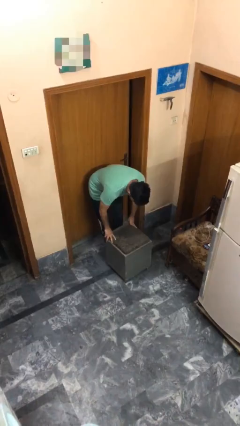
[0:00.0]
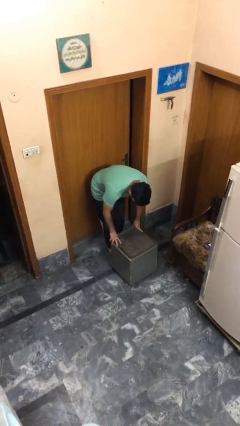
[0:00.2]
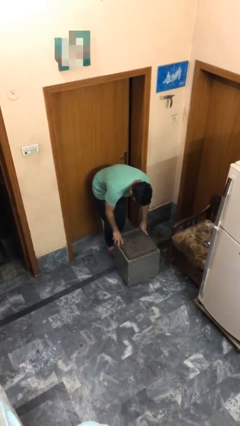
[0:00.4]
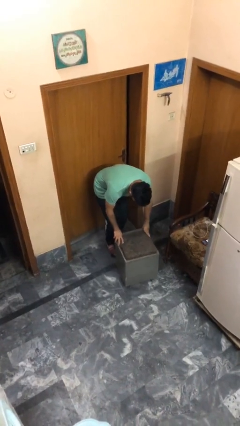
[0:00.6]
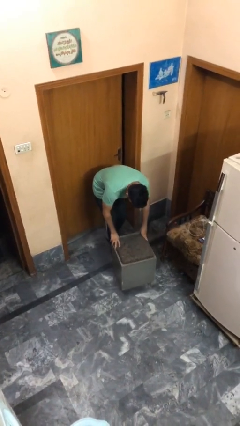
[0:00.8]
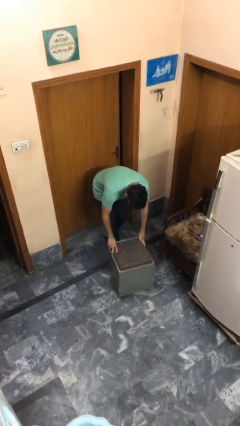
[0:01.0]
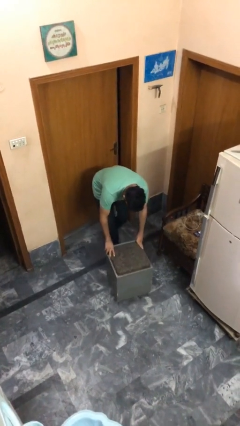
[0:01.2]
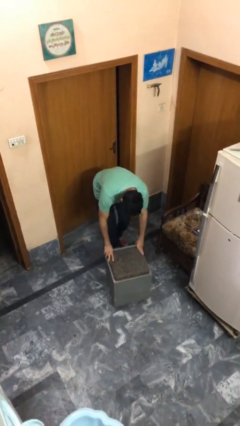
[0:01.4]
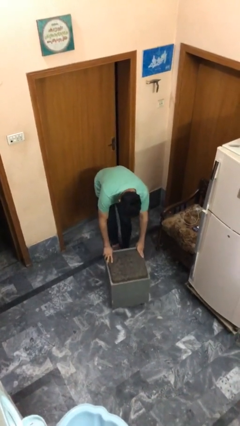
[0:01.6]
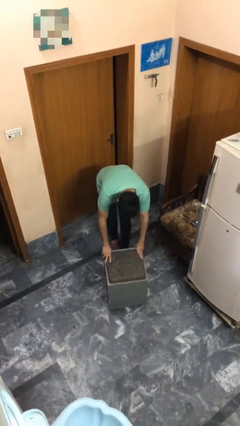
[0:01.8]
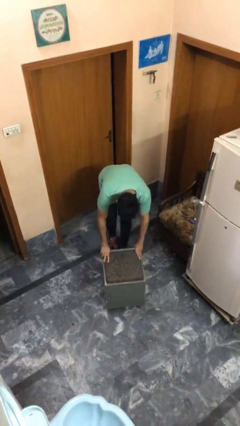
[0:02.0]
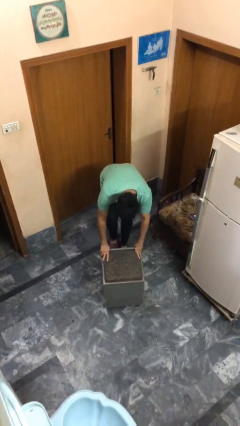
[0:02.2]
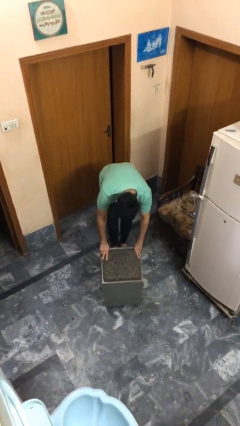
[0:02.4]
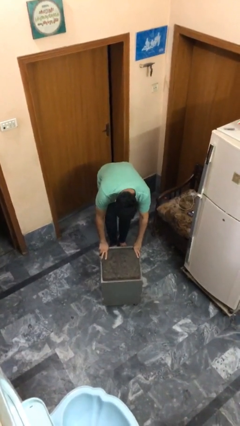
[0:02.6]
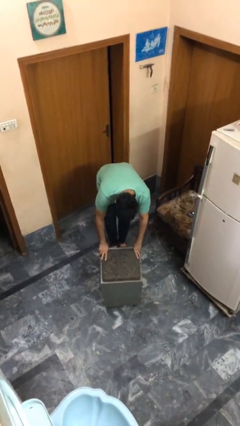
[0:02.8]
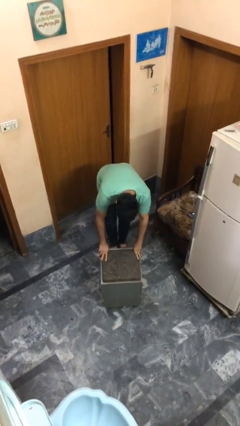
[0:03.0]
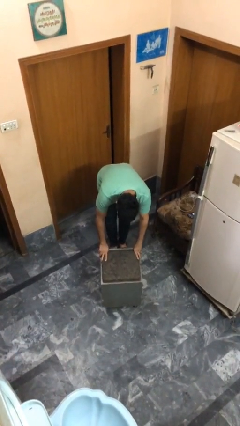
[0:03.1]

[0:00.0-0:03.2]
person pushes wheeled cart

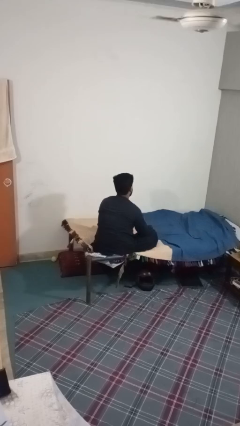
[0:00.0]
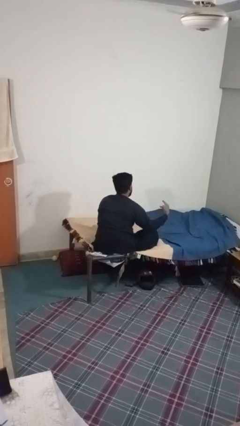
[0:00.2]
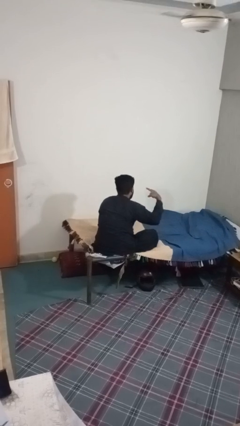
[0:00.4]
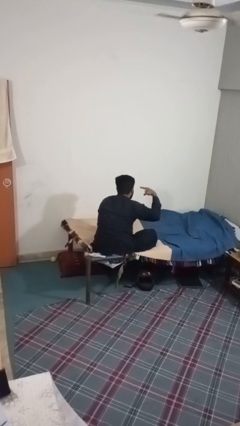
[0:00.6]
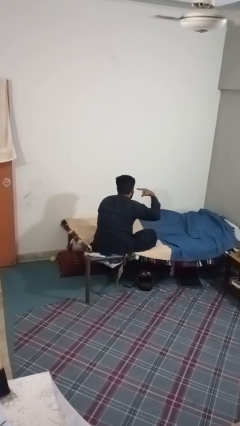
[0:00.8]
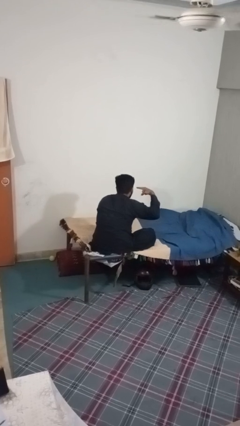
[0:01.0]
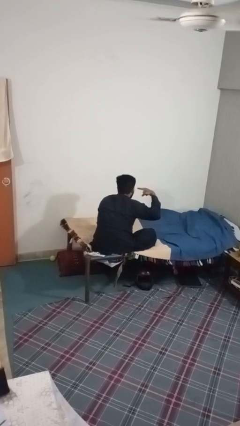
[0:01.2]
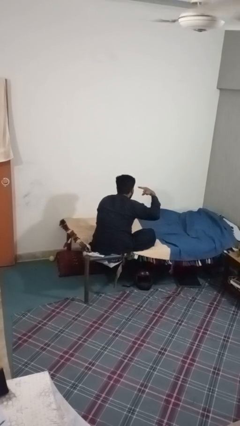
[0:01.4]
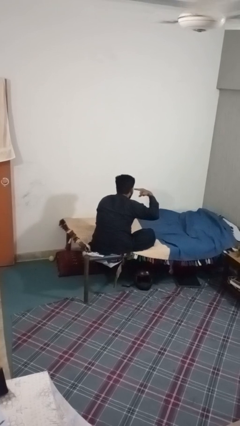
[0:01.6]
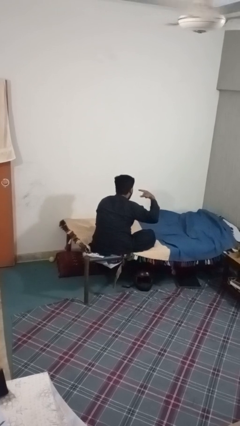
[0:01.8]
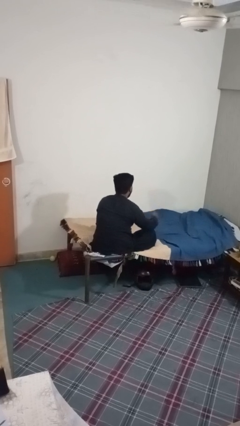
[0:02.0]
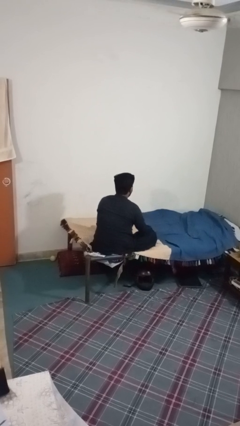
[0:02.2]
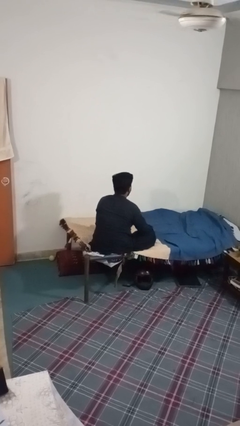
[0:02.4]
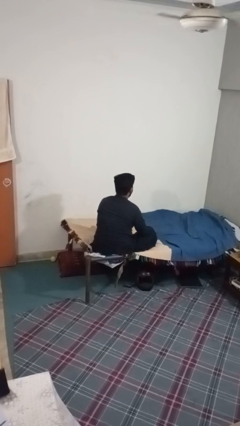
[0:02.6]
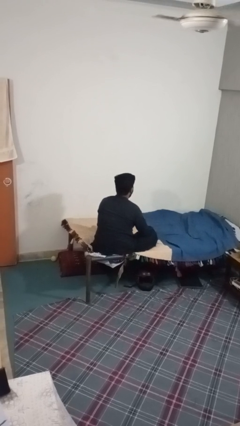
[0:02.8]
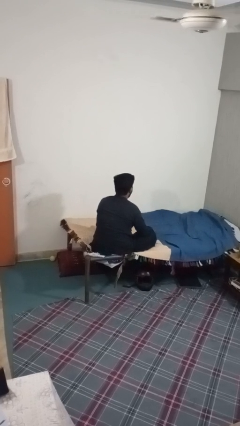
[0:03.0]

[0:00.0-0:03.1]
person gestures listen closely

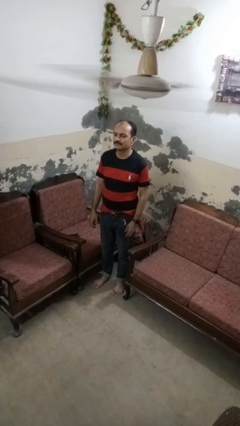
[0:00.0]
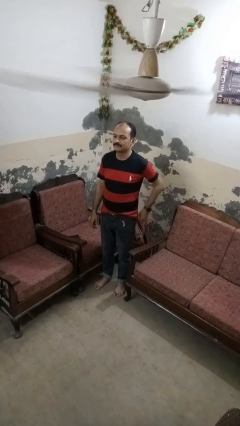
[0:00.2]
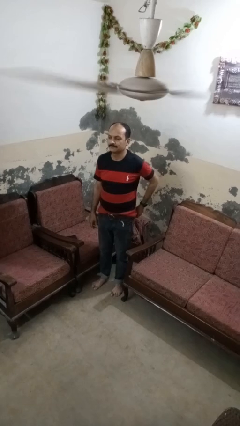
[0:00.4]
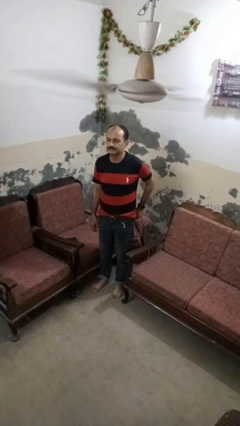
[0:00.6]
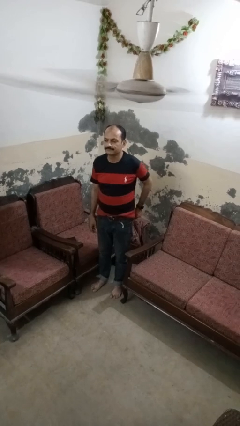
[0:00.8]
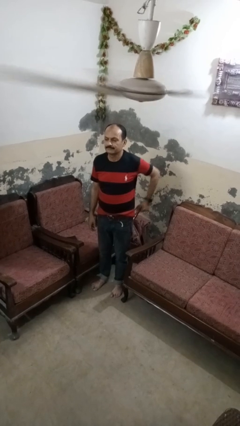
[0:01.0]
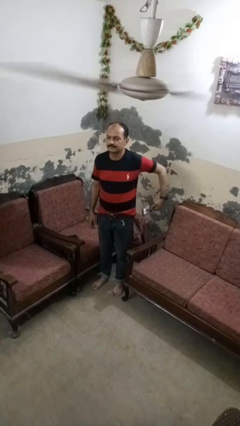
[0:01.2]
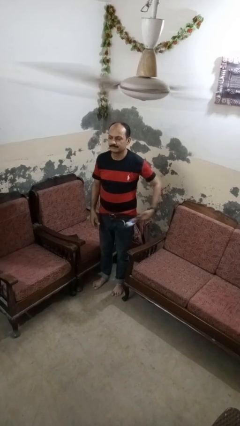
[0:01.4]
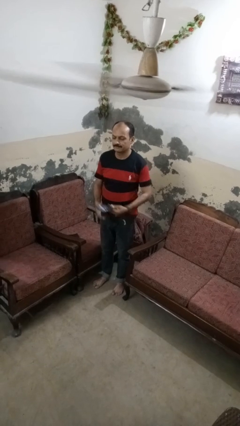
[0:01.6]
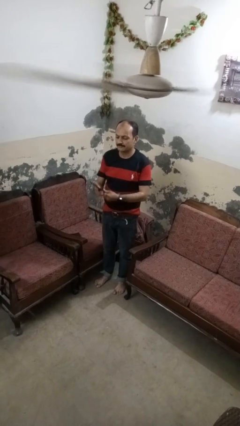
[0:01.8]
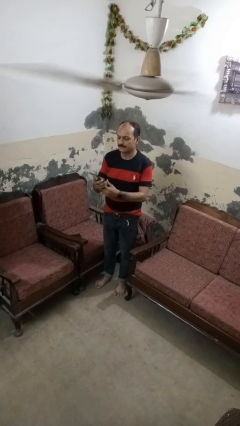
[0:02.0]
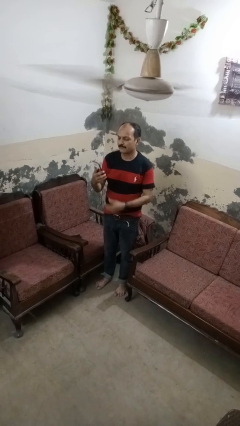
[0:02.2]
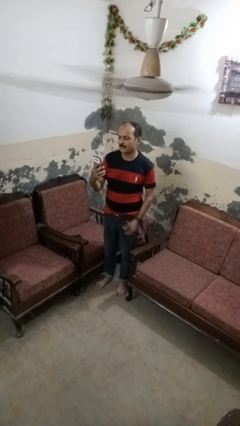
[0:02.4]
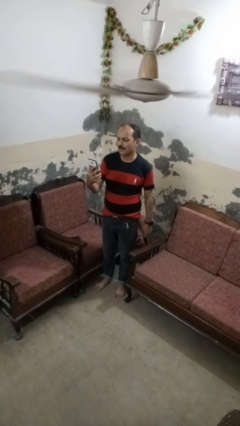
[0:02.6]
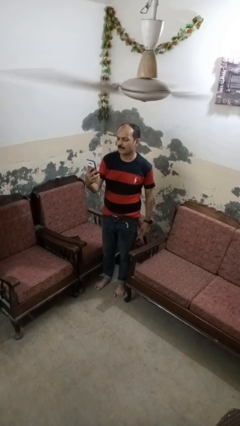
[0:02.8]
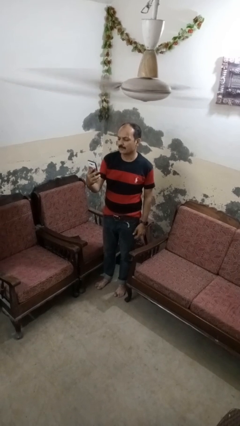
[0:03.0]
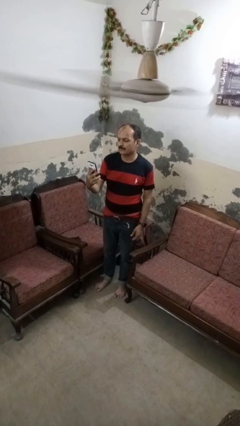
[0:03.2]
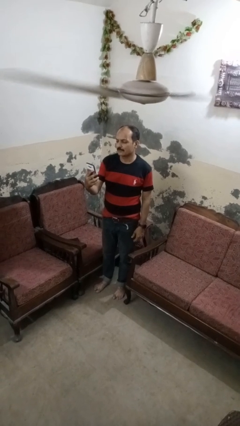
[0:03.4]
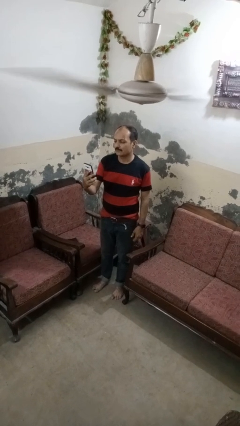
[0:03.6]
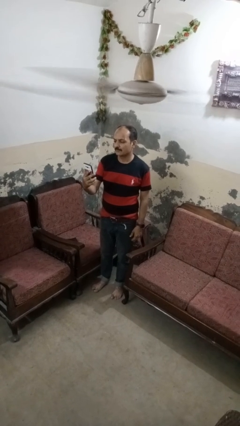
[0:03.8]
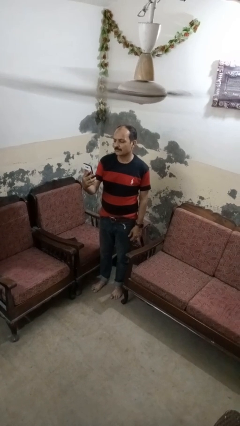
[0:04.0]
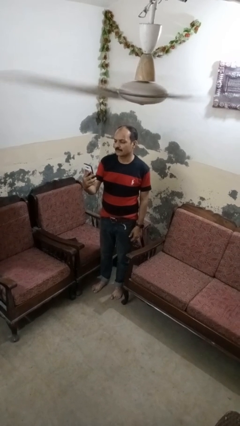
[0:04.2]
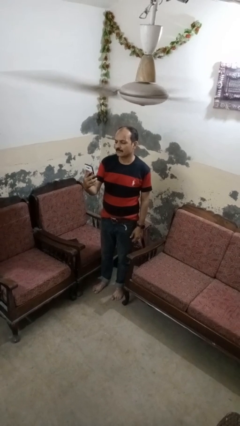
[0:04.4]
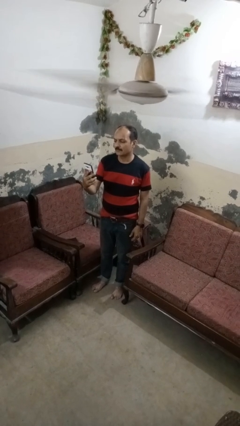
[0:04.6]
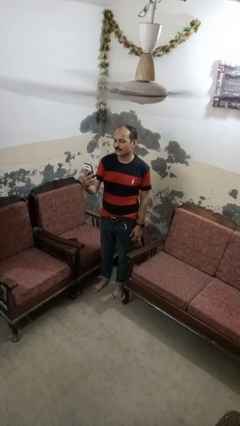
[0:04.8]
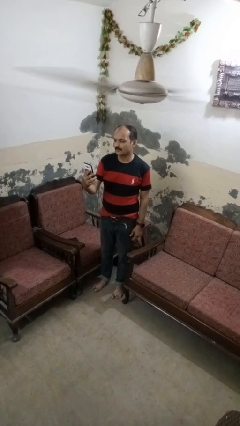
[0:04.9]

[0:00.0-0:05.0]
person takes phone from pocket

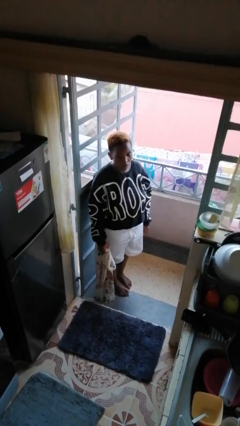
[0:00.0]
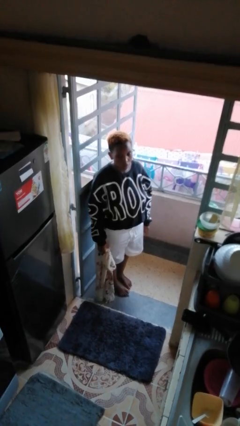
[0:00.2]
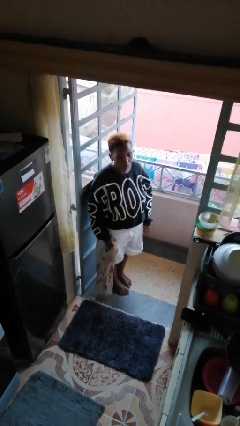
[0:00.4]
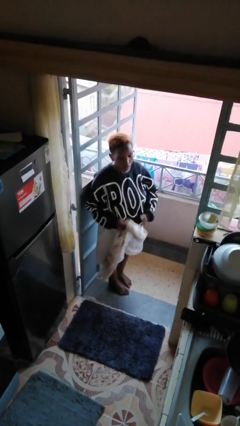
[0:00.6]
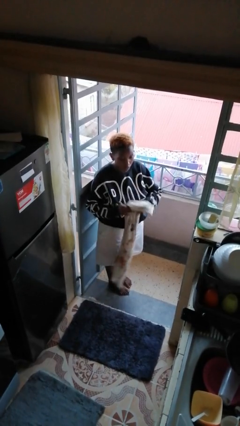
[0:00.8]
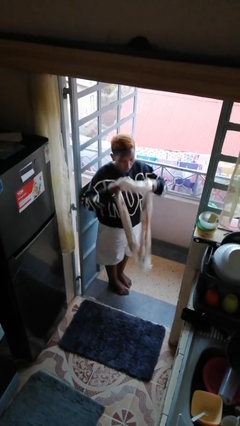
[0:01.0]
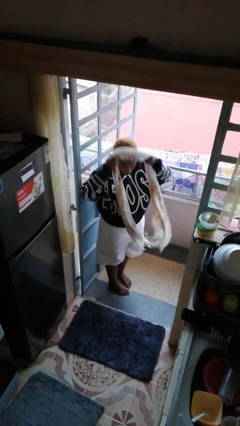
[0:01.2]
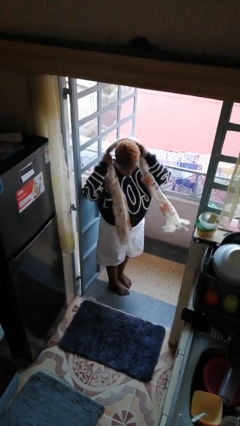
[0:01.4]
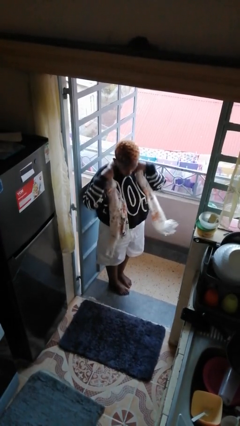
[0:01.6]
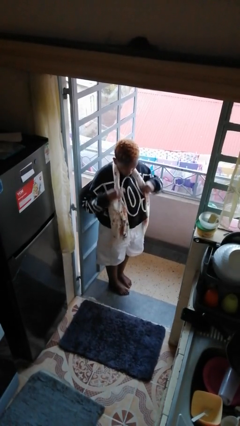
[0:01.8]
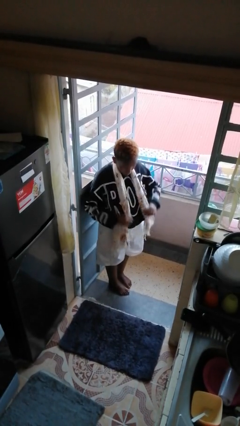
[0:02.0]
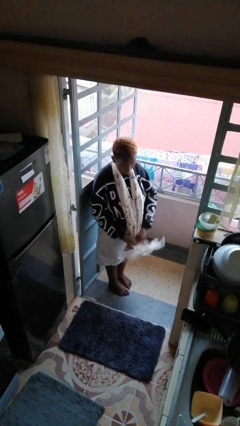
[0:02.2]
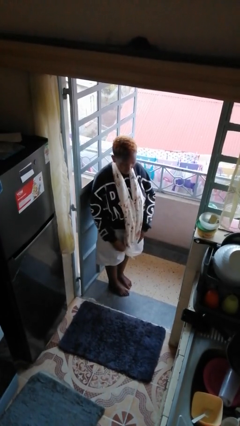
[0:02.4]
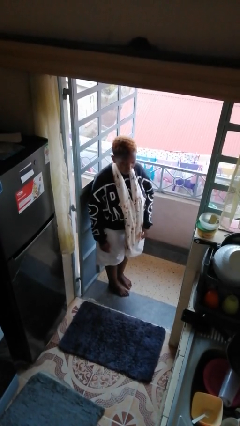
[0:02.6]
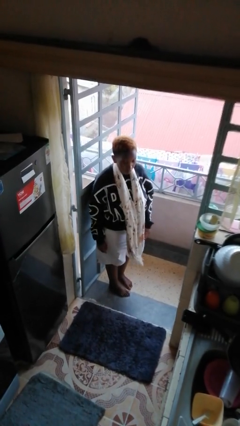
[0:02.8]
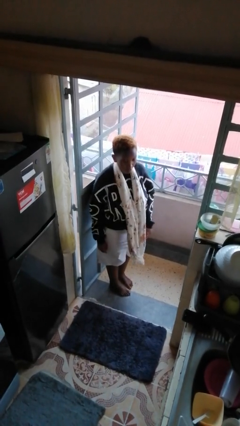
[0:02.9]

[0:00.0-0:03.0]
person puts on scarf

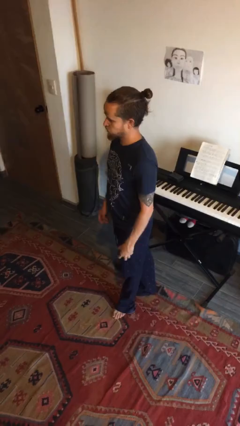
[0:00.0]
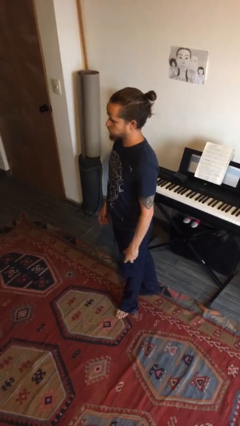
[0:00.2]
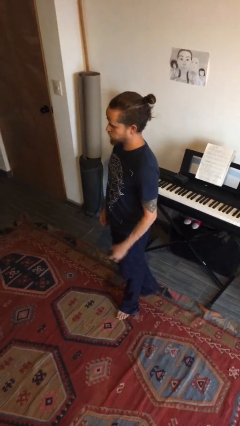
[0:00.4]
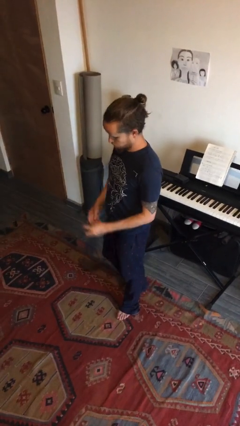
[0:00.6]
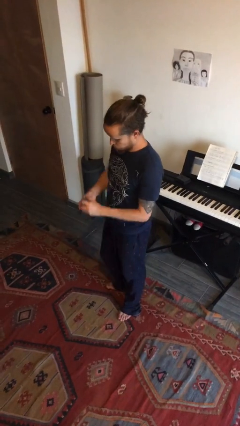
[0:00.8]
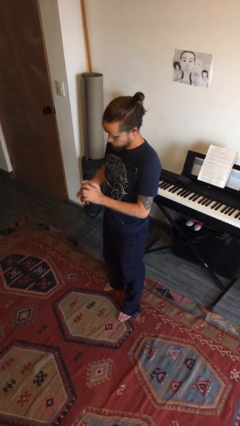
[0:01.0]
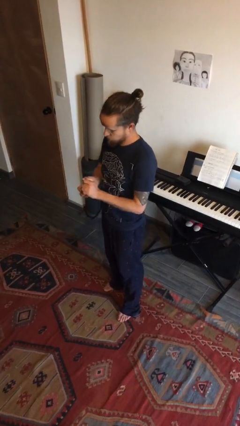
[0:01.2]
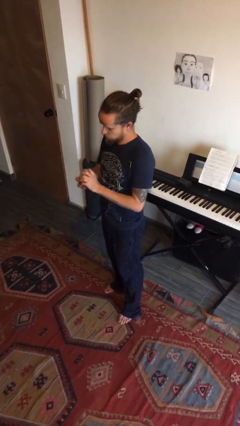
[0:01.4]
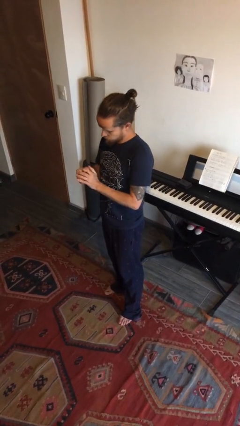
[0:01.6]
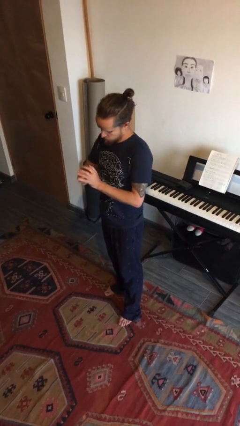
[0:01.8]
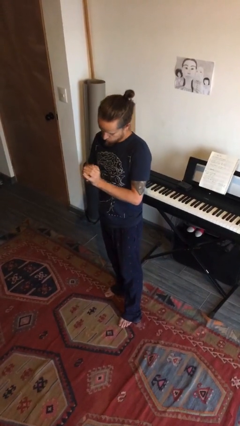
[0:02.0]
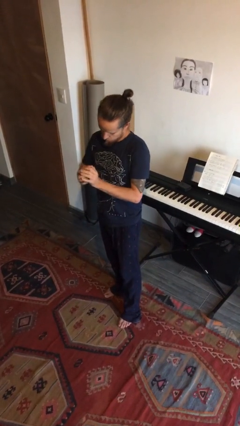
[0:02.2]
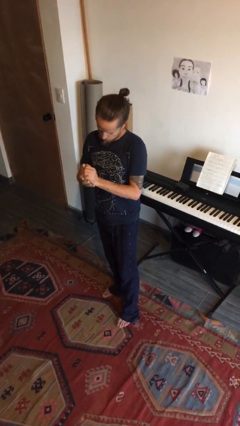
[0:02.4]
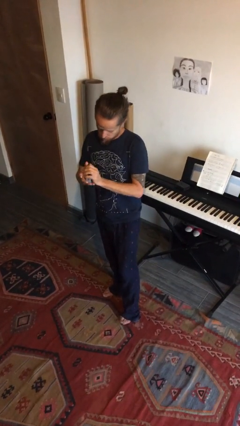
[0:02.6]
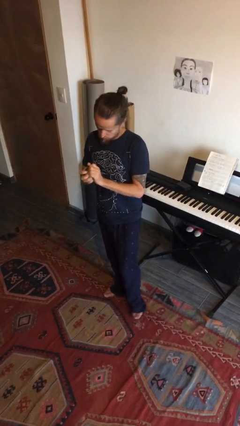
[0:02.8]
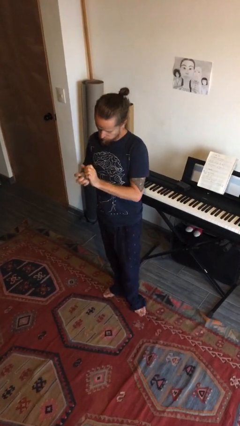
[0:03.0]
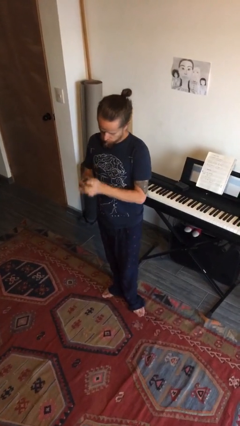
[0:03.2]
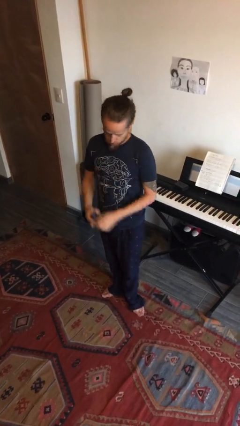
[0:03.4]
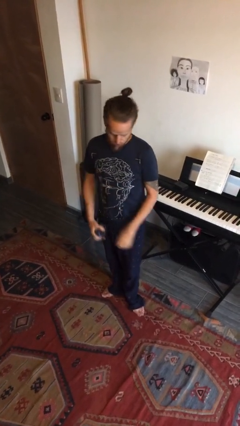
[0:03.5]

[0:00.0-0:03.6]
person squeezes object
